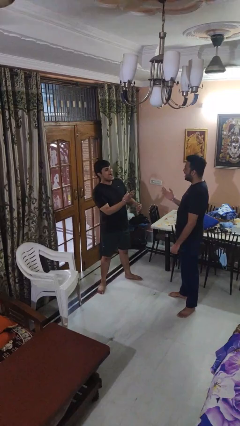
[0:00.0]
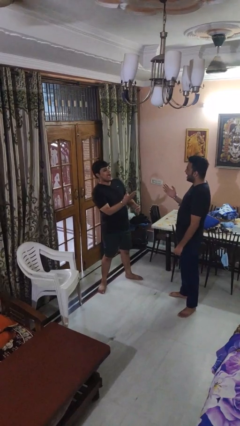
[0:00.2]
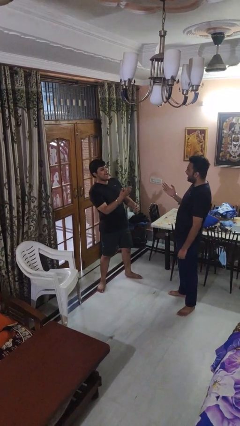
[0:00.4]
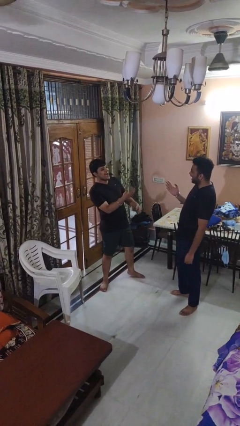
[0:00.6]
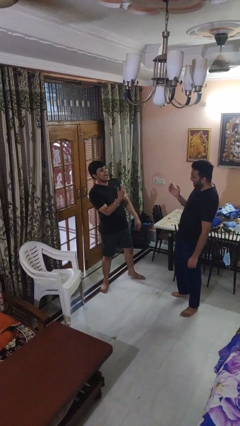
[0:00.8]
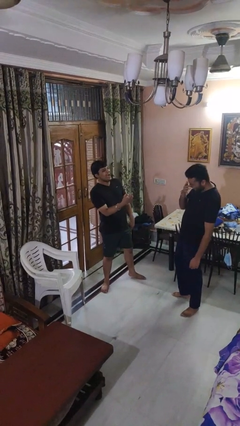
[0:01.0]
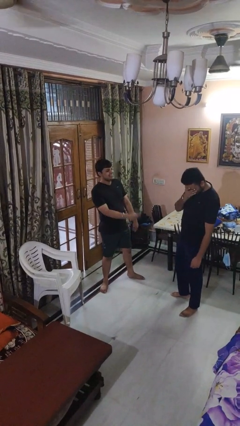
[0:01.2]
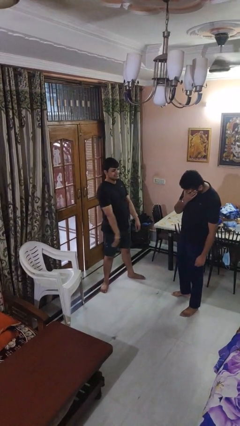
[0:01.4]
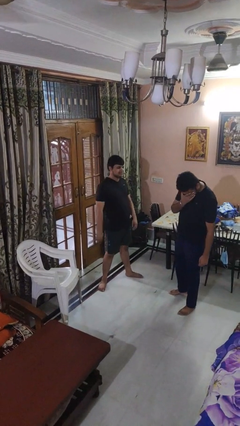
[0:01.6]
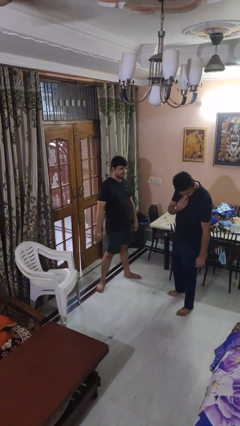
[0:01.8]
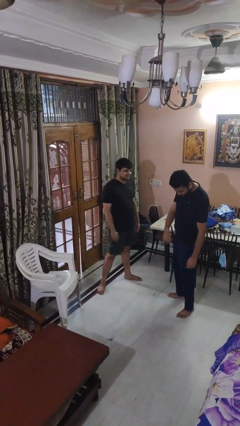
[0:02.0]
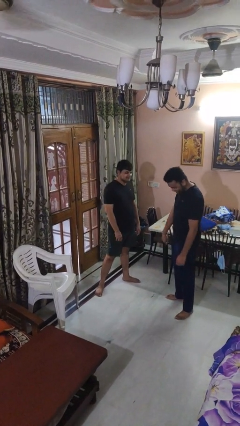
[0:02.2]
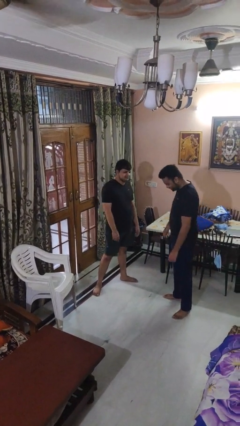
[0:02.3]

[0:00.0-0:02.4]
person laughs with person

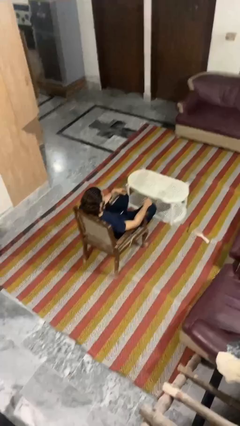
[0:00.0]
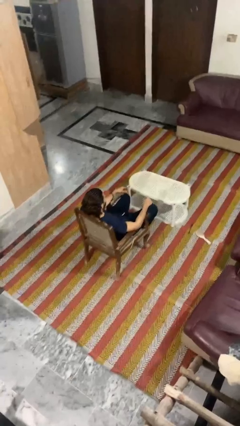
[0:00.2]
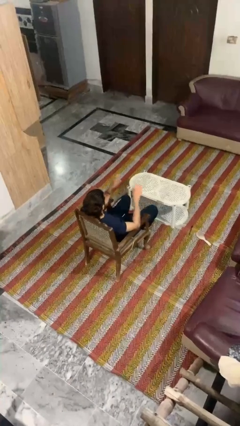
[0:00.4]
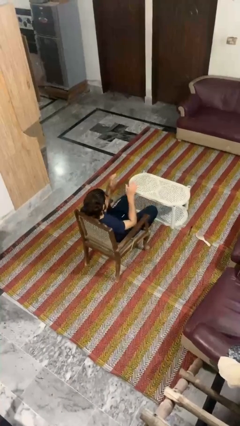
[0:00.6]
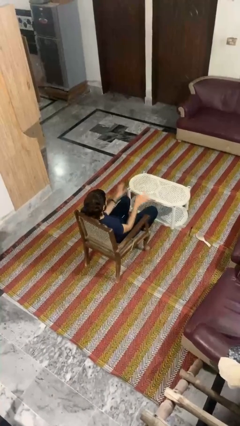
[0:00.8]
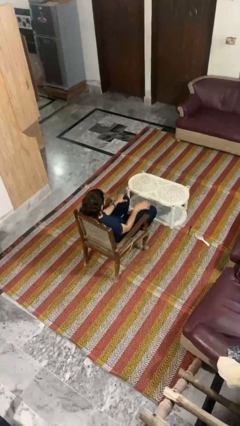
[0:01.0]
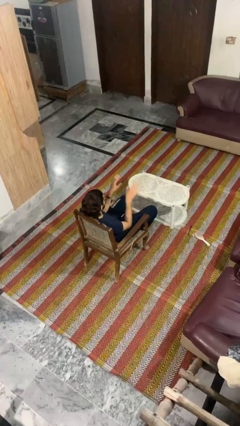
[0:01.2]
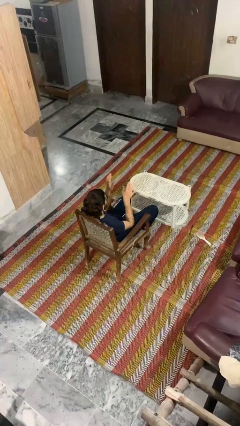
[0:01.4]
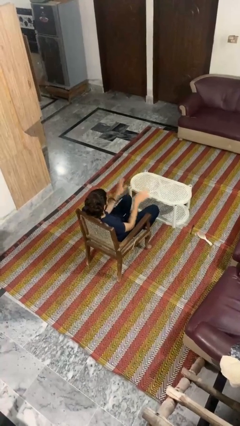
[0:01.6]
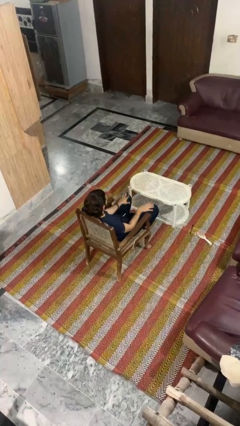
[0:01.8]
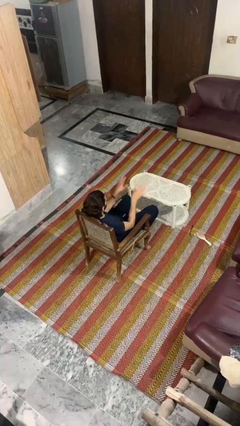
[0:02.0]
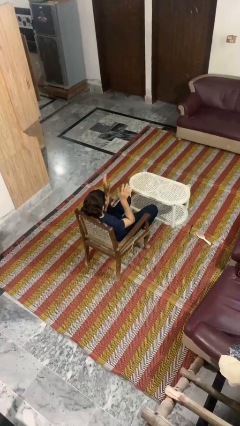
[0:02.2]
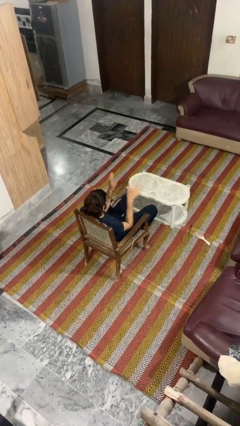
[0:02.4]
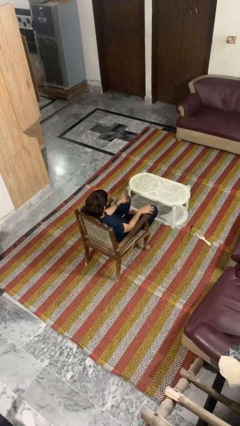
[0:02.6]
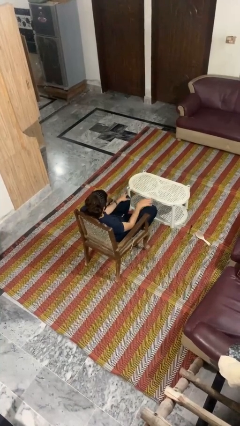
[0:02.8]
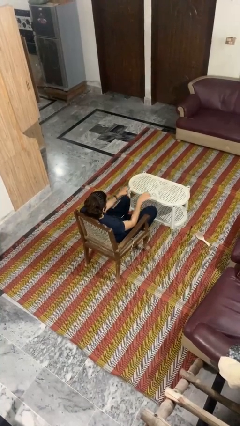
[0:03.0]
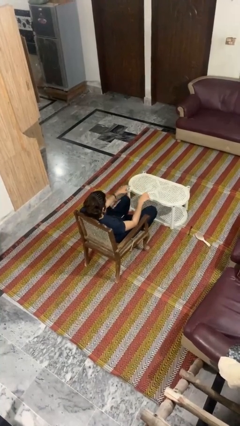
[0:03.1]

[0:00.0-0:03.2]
person slaps hands on thighs

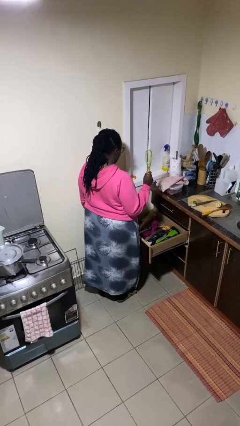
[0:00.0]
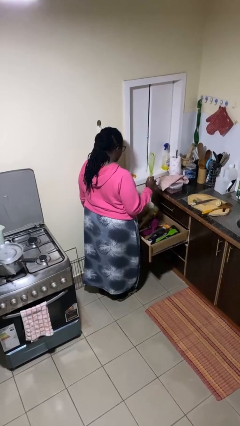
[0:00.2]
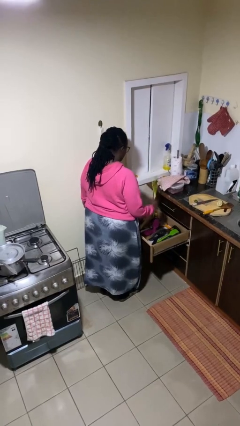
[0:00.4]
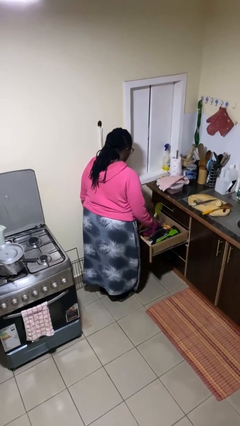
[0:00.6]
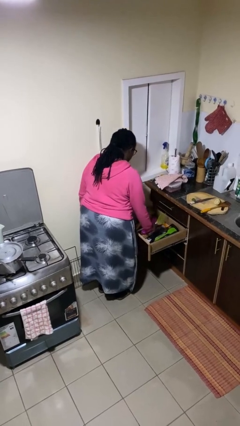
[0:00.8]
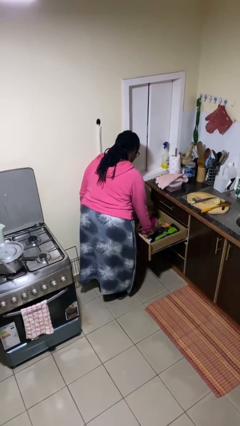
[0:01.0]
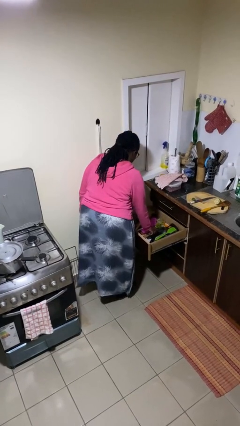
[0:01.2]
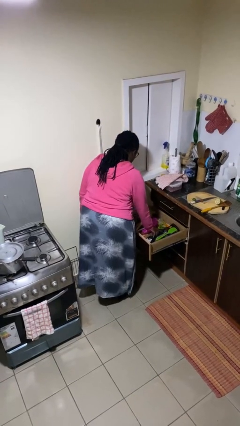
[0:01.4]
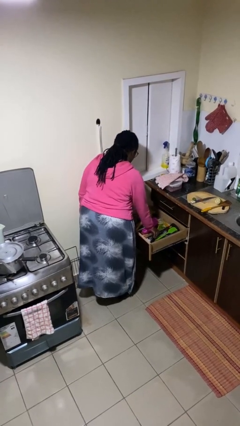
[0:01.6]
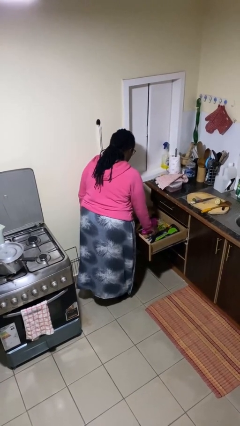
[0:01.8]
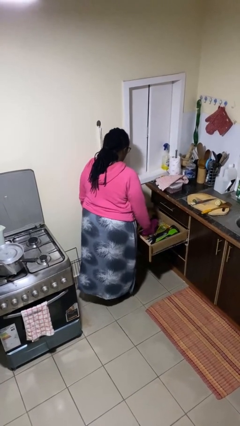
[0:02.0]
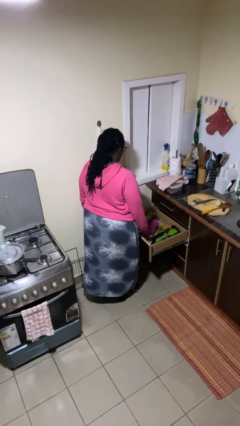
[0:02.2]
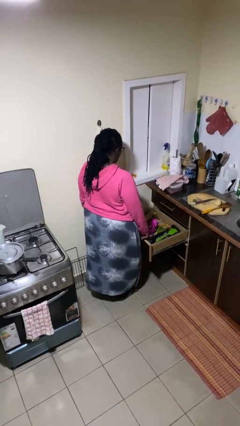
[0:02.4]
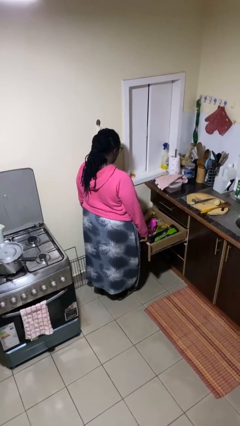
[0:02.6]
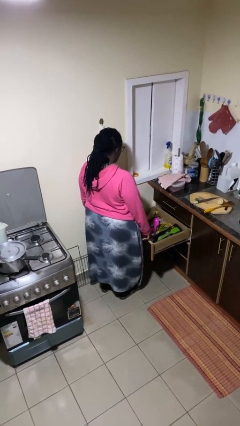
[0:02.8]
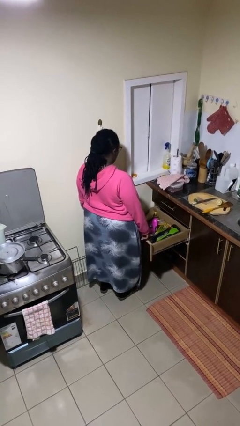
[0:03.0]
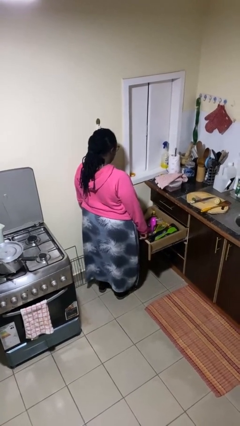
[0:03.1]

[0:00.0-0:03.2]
person puts object into kitchen drawer

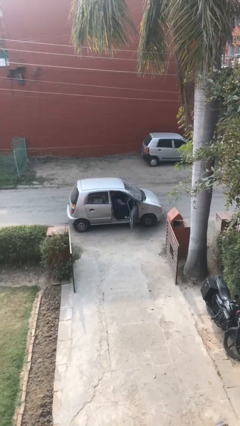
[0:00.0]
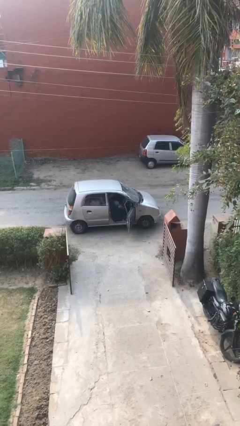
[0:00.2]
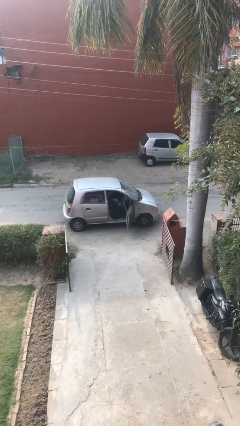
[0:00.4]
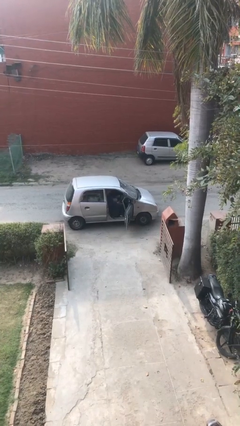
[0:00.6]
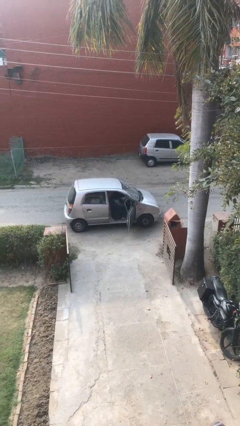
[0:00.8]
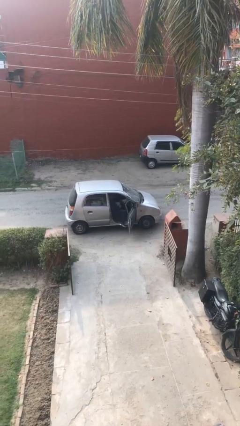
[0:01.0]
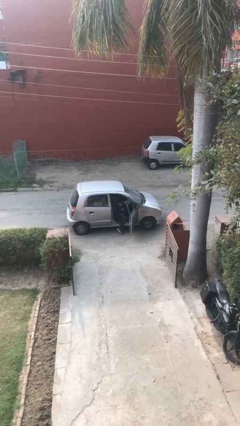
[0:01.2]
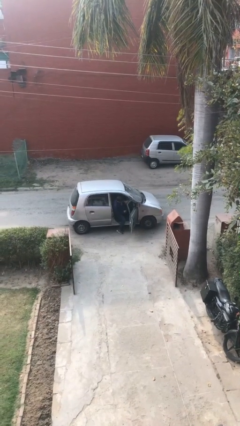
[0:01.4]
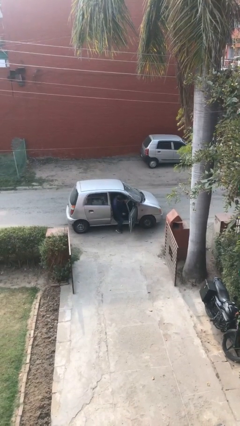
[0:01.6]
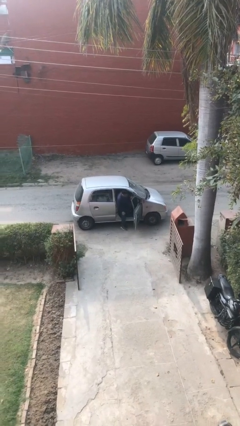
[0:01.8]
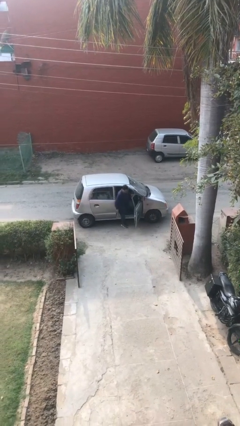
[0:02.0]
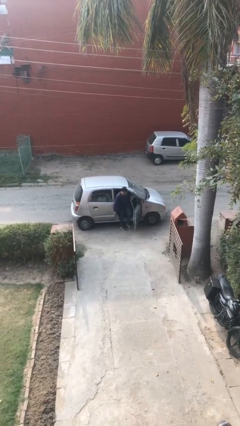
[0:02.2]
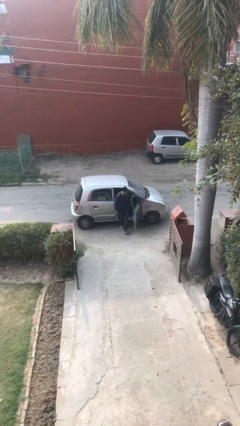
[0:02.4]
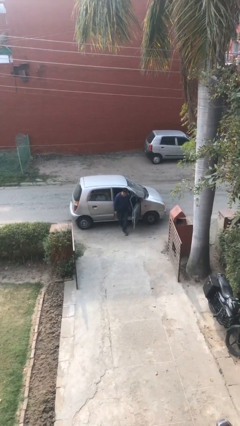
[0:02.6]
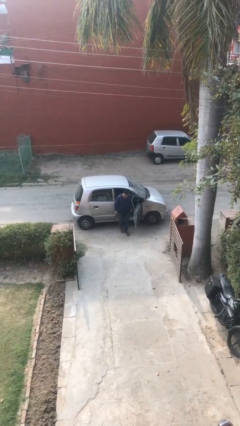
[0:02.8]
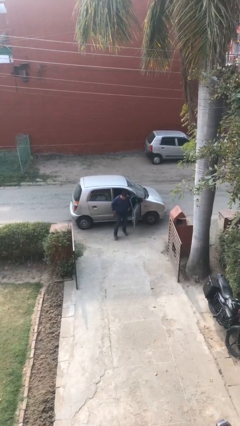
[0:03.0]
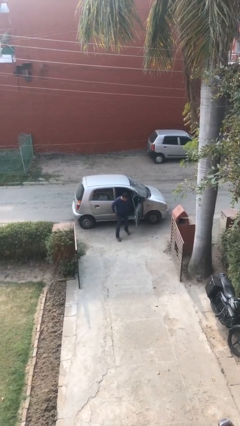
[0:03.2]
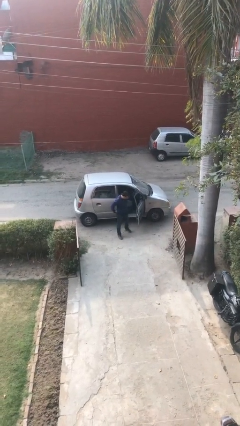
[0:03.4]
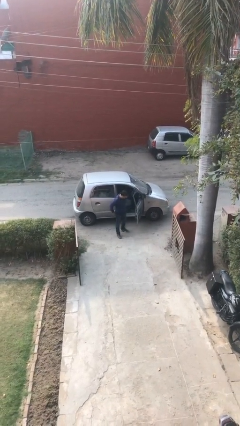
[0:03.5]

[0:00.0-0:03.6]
person exits car

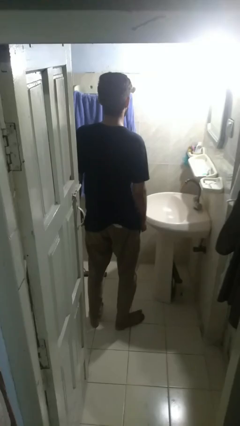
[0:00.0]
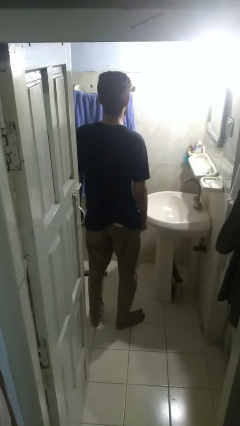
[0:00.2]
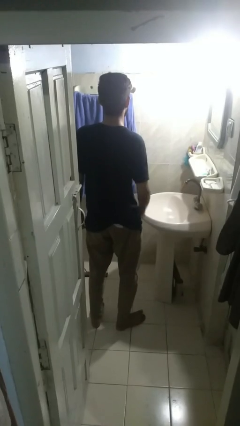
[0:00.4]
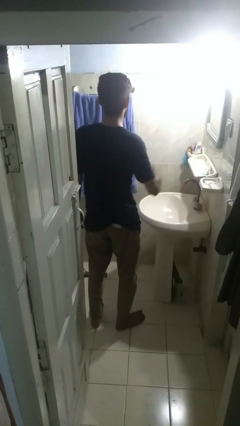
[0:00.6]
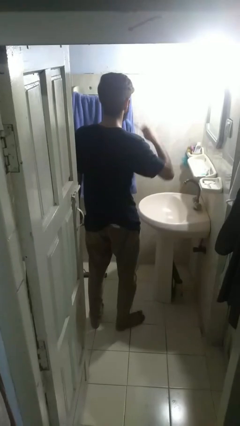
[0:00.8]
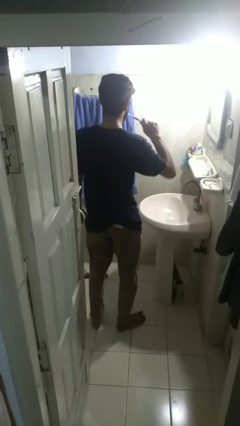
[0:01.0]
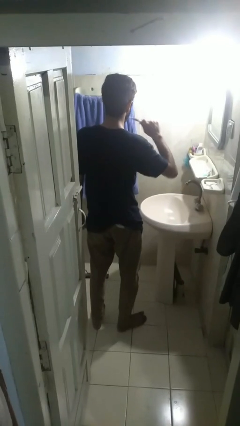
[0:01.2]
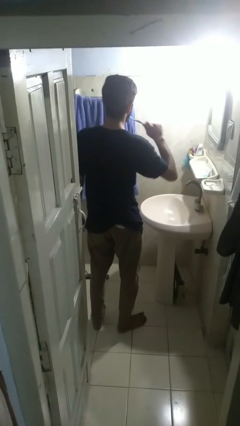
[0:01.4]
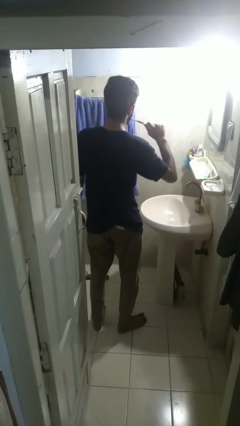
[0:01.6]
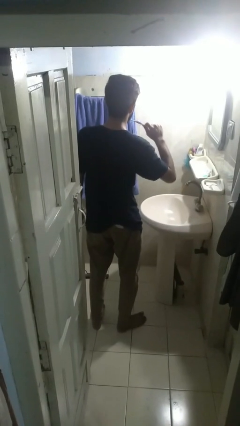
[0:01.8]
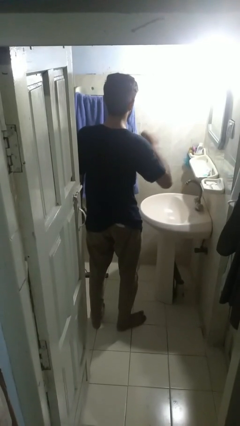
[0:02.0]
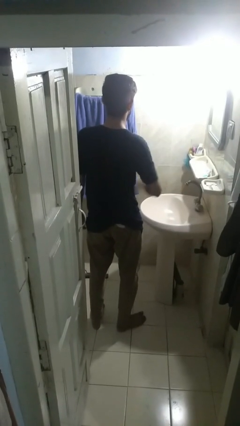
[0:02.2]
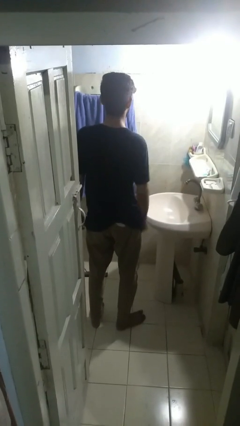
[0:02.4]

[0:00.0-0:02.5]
person brushes teeth

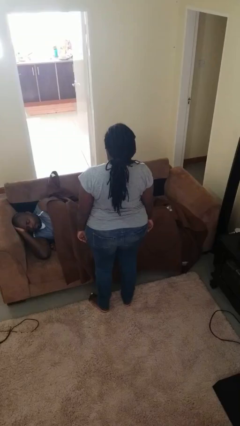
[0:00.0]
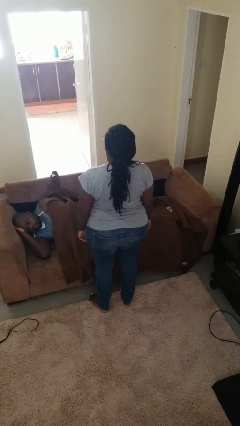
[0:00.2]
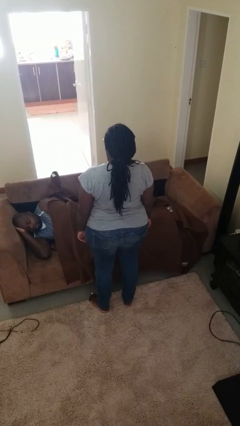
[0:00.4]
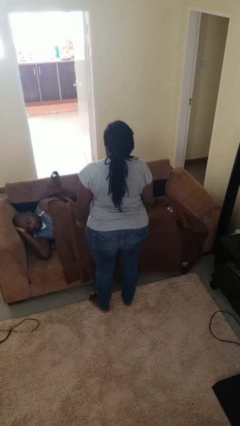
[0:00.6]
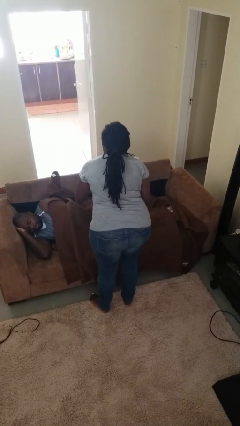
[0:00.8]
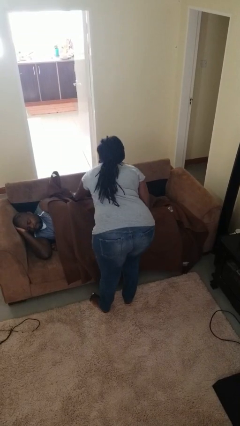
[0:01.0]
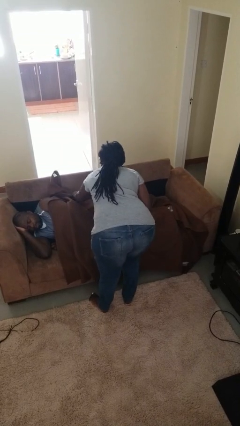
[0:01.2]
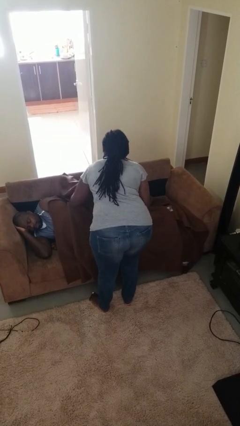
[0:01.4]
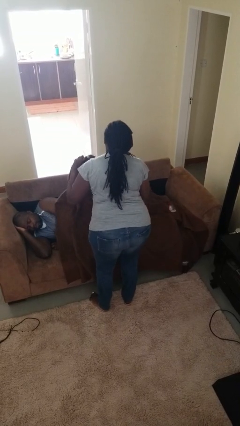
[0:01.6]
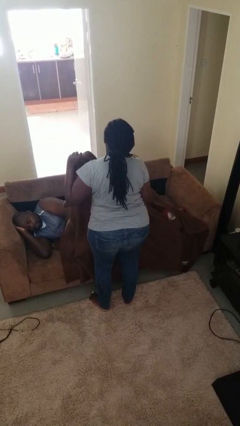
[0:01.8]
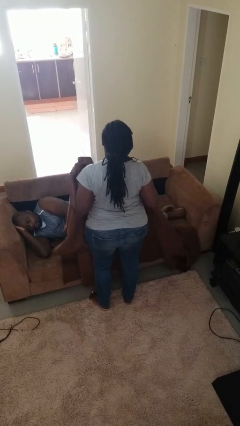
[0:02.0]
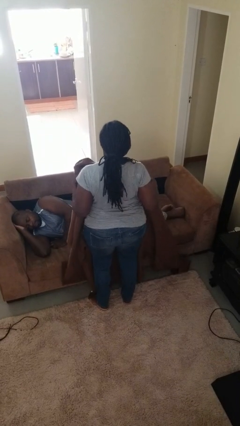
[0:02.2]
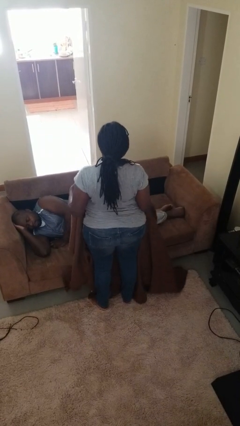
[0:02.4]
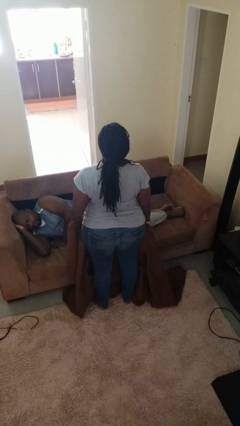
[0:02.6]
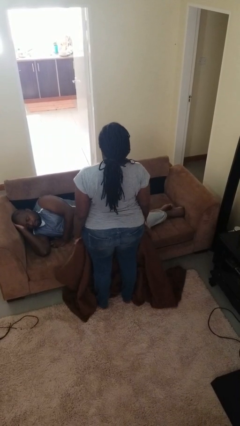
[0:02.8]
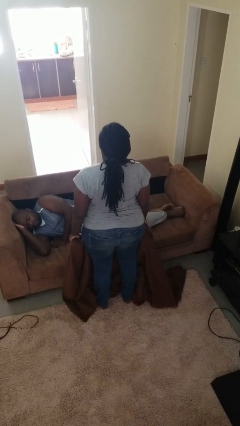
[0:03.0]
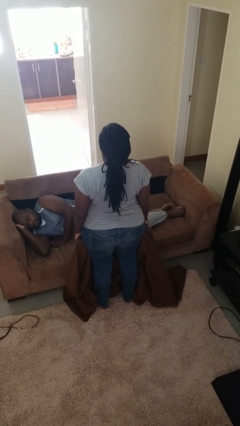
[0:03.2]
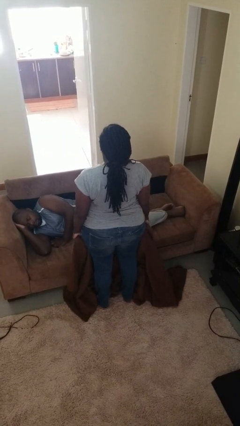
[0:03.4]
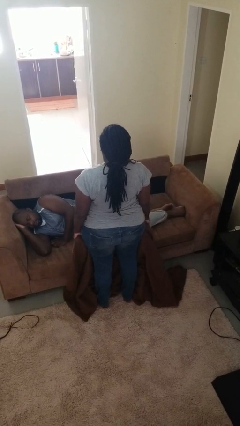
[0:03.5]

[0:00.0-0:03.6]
person uncovers friend with blanket
